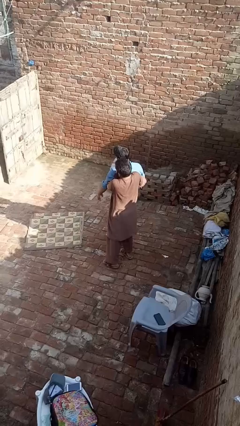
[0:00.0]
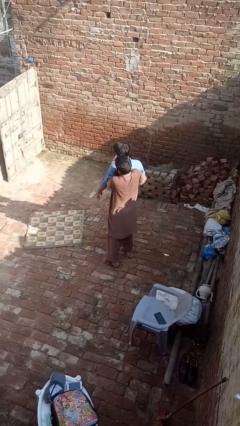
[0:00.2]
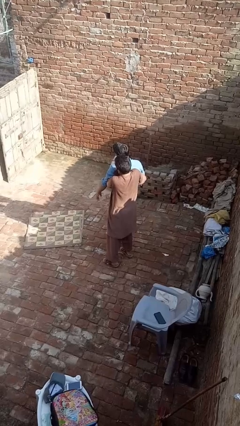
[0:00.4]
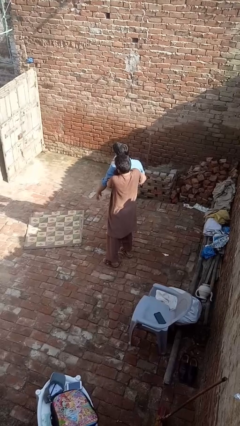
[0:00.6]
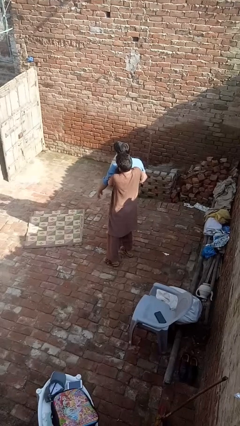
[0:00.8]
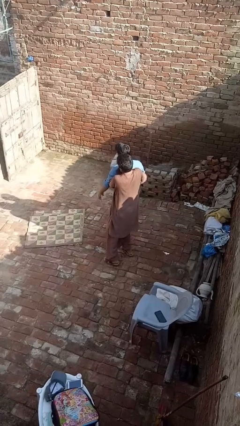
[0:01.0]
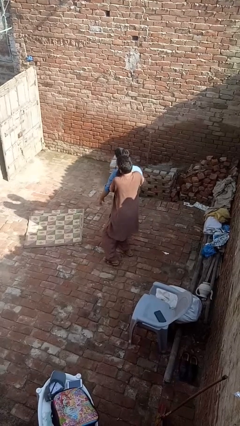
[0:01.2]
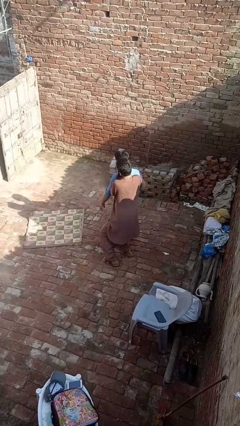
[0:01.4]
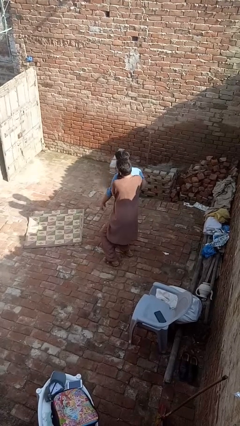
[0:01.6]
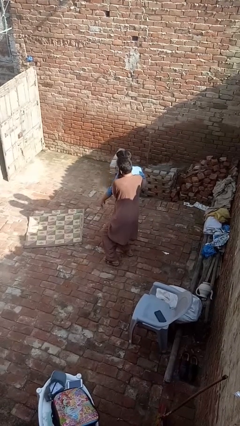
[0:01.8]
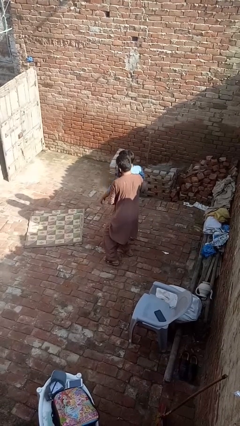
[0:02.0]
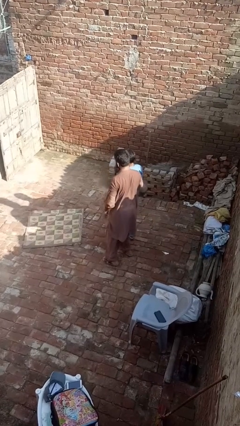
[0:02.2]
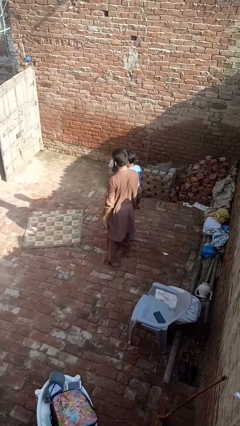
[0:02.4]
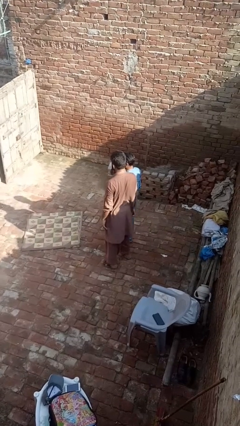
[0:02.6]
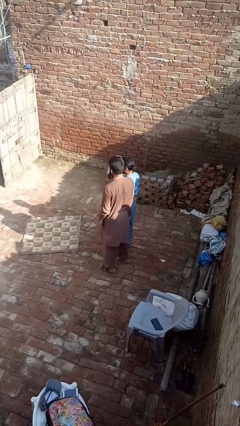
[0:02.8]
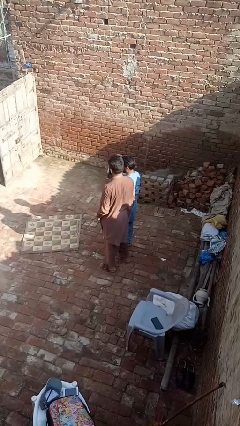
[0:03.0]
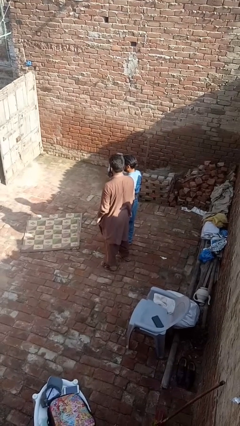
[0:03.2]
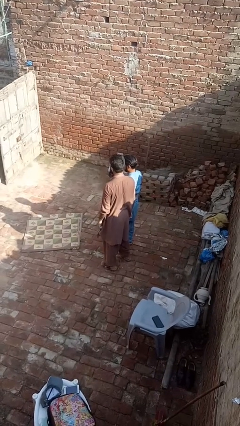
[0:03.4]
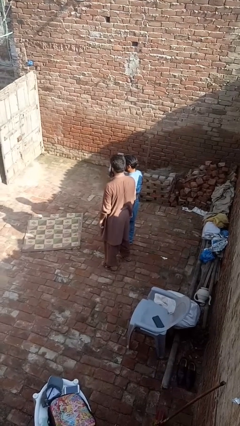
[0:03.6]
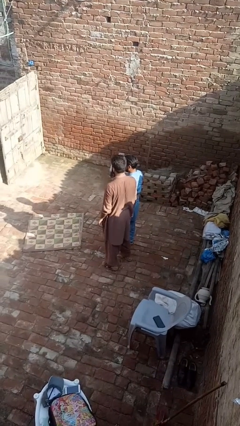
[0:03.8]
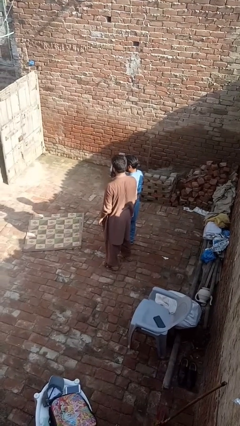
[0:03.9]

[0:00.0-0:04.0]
person puts down person

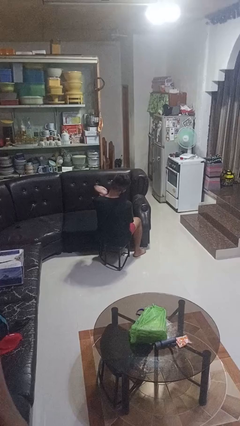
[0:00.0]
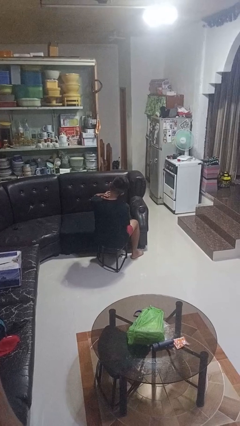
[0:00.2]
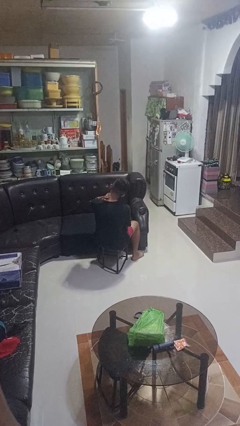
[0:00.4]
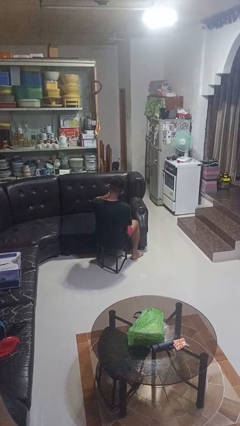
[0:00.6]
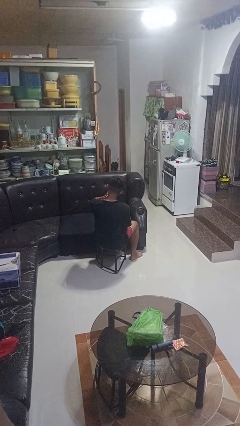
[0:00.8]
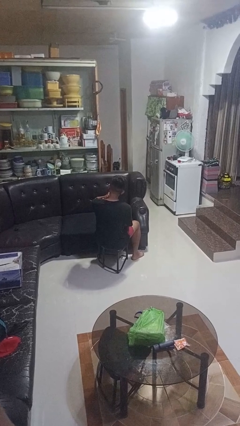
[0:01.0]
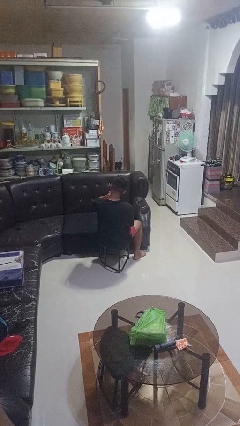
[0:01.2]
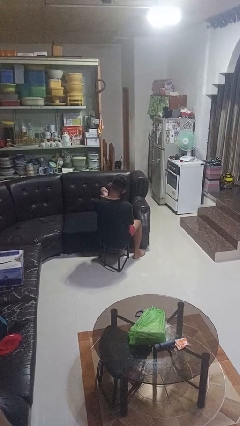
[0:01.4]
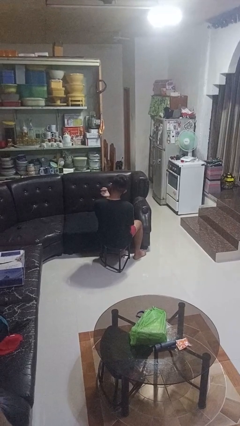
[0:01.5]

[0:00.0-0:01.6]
person swats bug

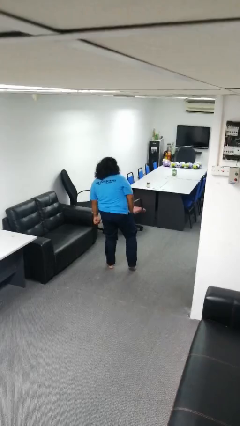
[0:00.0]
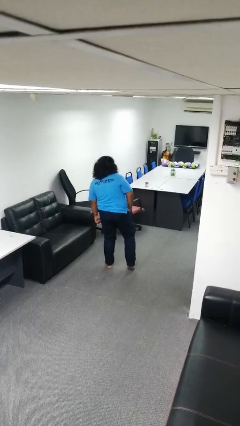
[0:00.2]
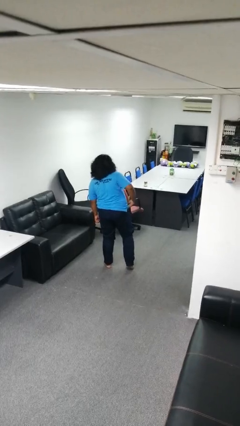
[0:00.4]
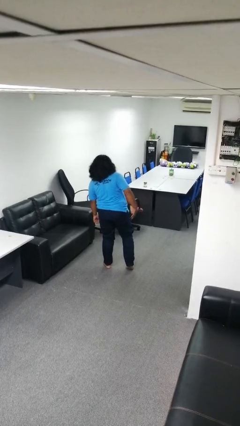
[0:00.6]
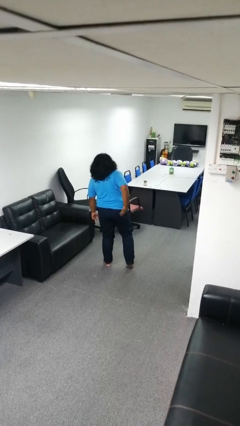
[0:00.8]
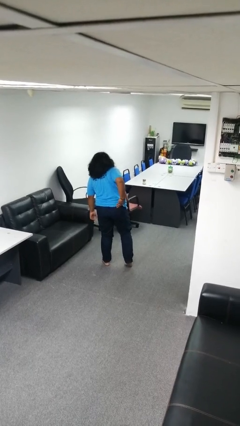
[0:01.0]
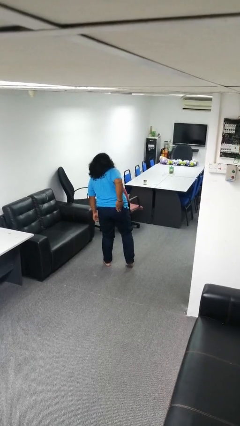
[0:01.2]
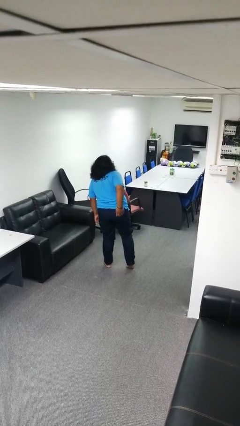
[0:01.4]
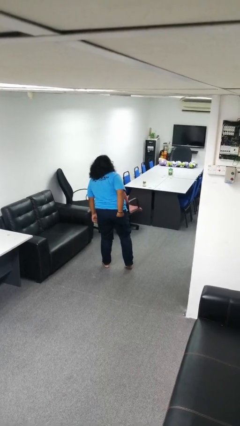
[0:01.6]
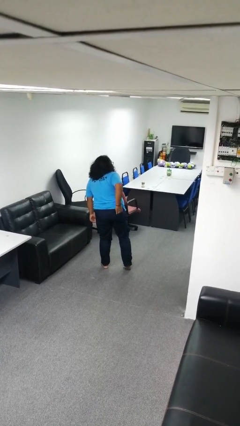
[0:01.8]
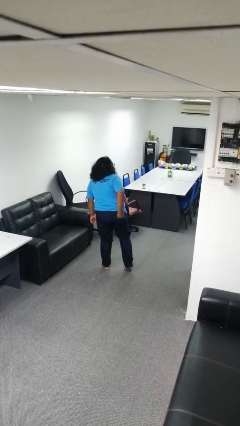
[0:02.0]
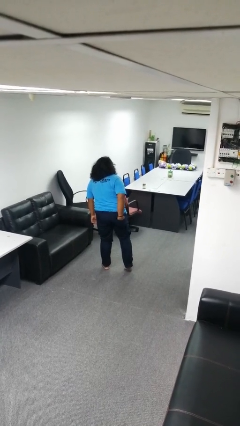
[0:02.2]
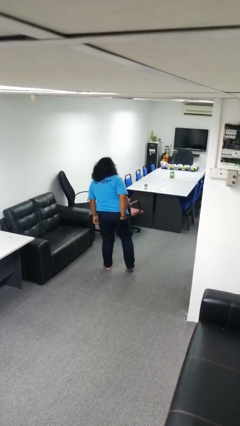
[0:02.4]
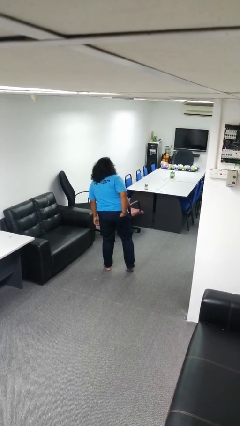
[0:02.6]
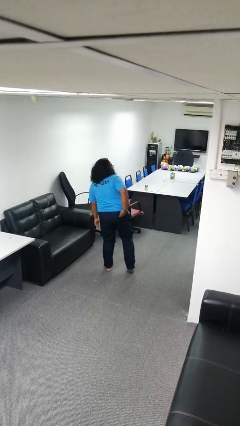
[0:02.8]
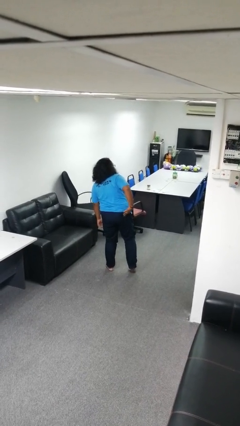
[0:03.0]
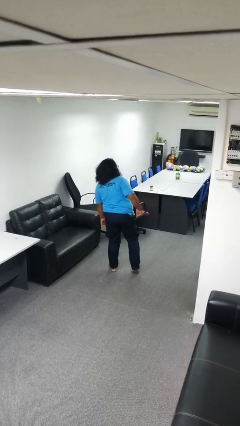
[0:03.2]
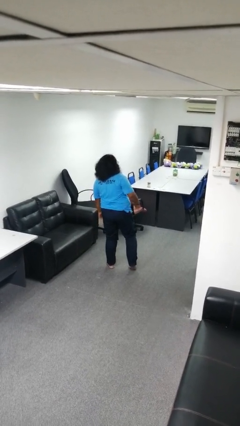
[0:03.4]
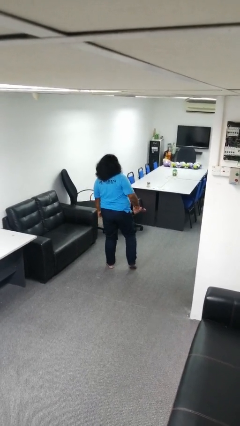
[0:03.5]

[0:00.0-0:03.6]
person puts hands in back pockets

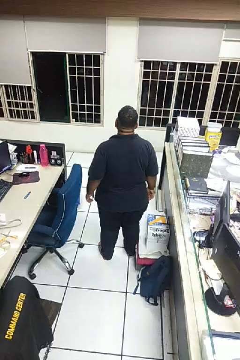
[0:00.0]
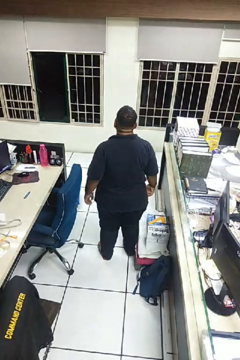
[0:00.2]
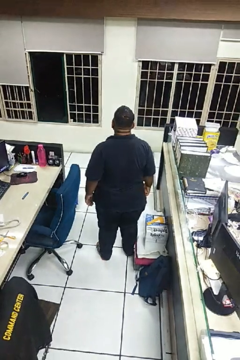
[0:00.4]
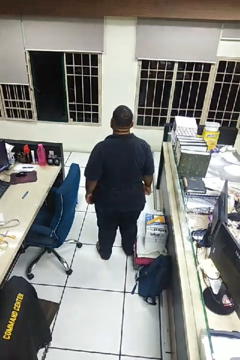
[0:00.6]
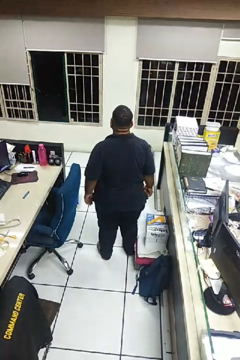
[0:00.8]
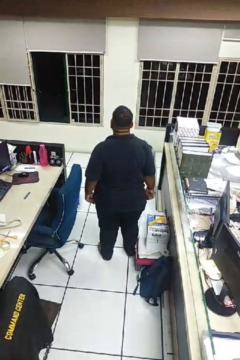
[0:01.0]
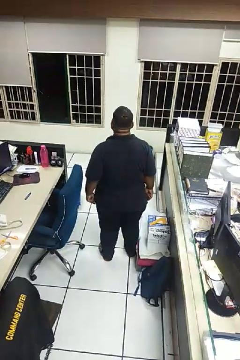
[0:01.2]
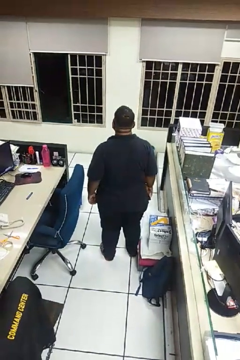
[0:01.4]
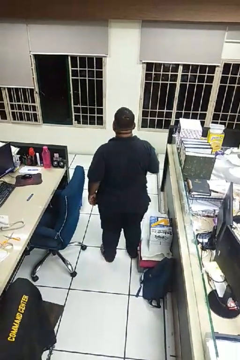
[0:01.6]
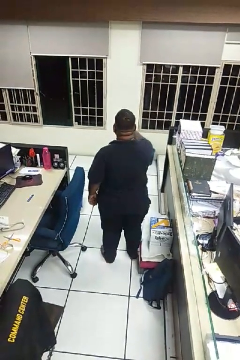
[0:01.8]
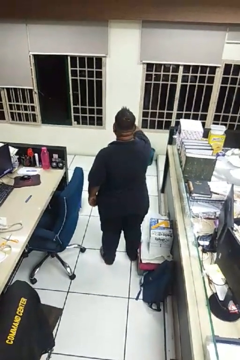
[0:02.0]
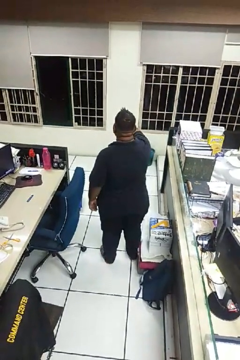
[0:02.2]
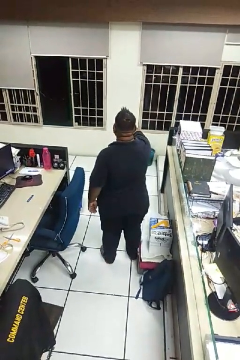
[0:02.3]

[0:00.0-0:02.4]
person gestures stop

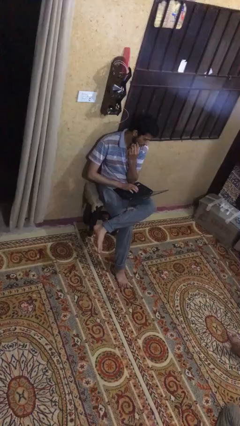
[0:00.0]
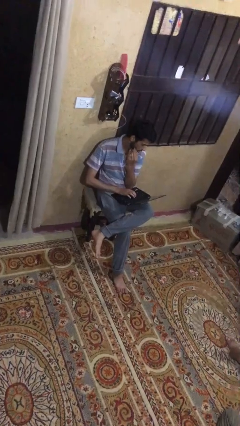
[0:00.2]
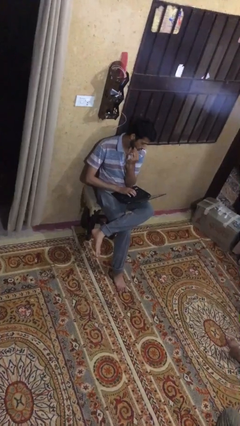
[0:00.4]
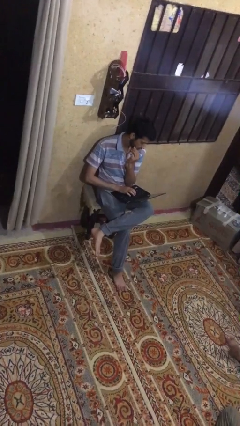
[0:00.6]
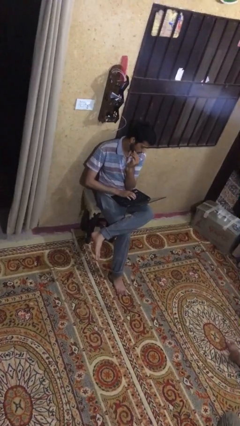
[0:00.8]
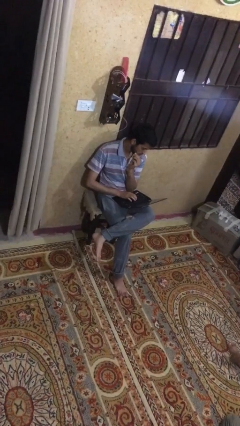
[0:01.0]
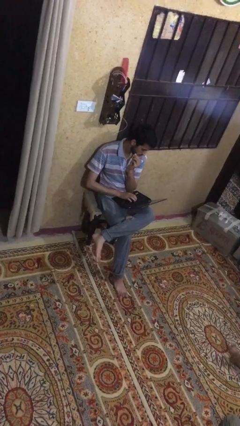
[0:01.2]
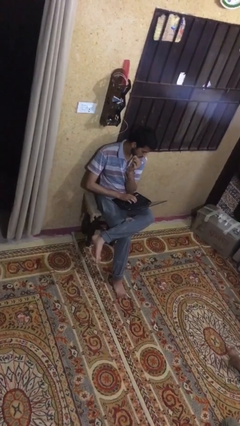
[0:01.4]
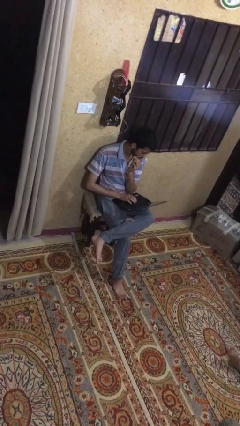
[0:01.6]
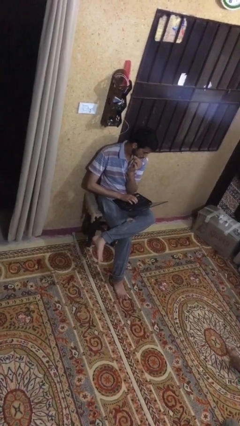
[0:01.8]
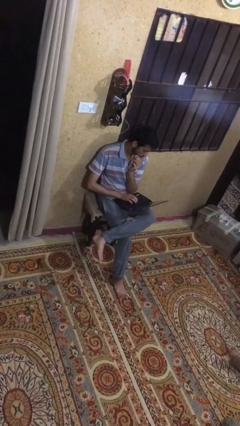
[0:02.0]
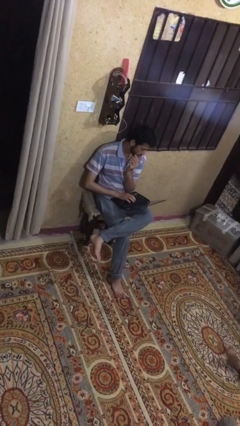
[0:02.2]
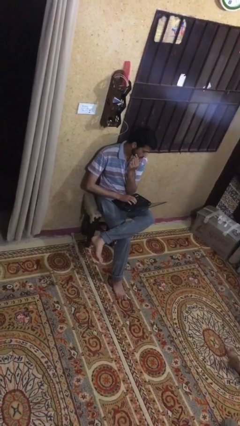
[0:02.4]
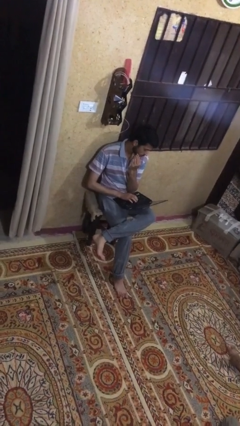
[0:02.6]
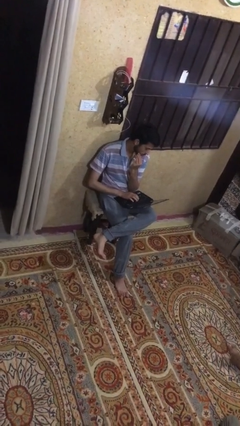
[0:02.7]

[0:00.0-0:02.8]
person interacts with laptop

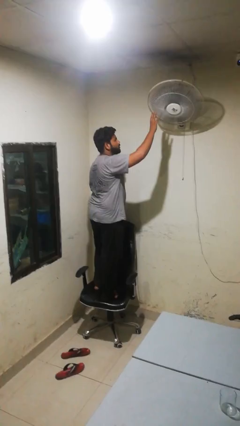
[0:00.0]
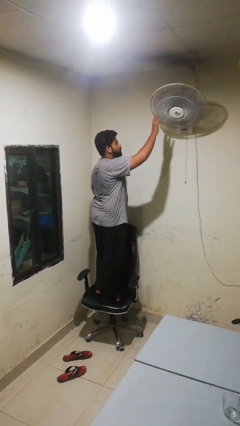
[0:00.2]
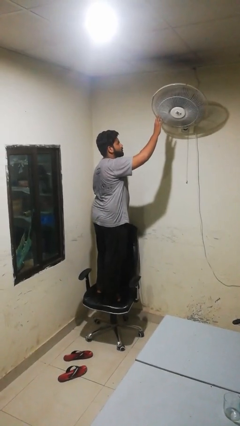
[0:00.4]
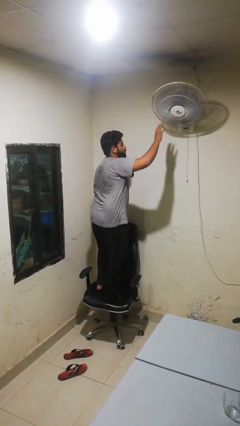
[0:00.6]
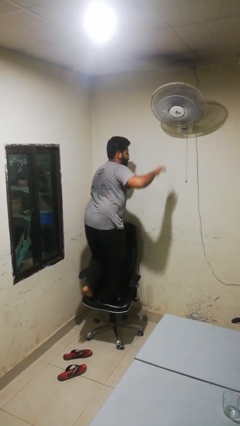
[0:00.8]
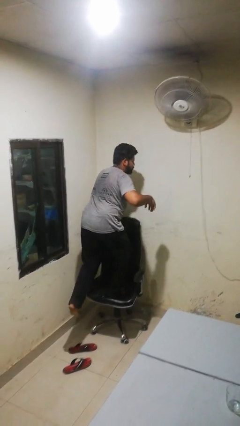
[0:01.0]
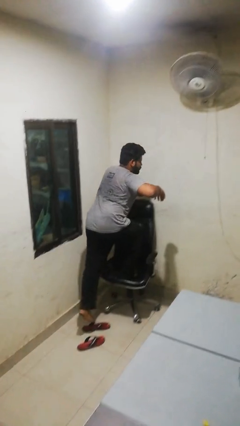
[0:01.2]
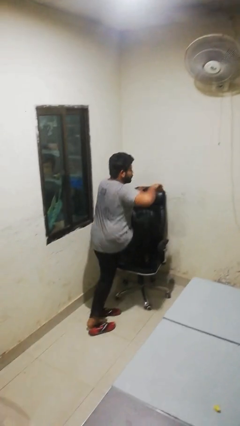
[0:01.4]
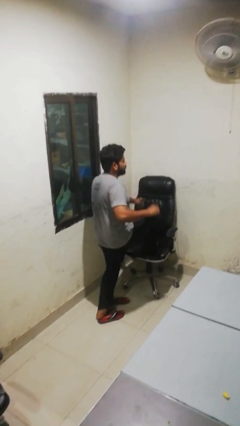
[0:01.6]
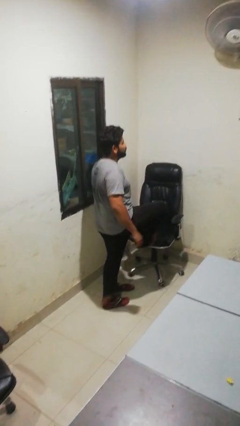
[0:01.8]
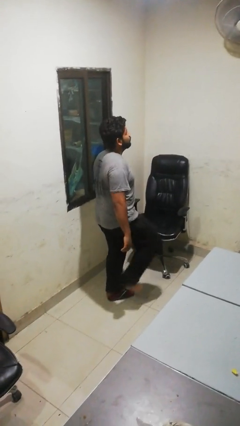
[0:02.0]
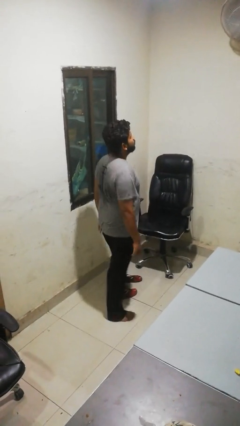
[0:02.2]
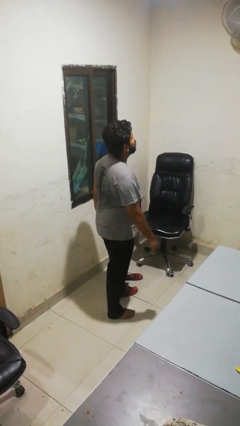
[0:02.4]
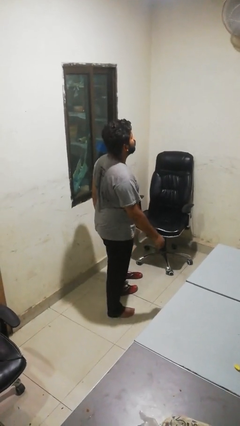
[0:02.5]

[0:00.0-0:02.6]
person climbs off chair

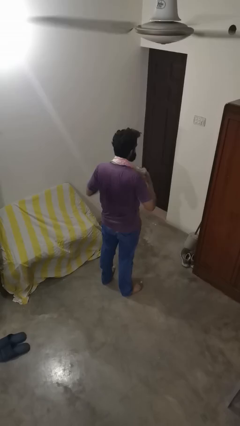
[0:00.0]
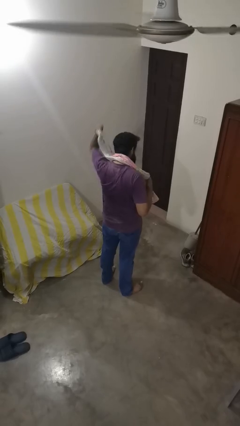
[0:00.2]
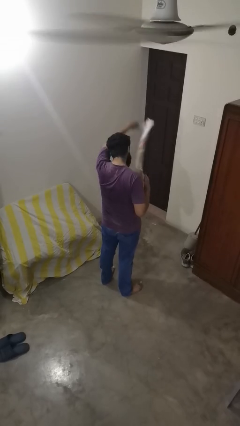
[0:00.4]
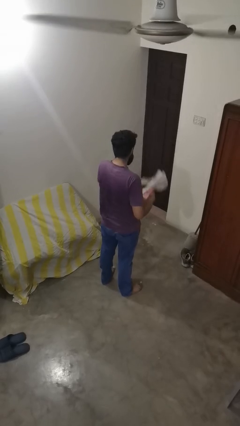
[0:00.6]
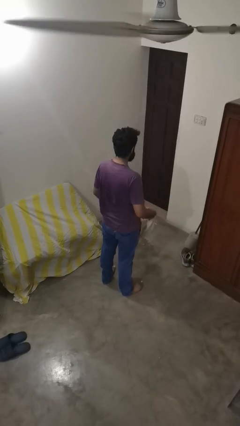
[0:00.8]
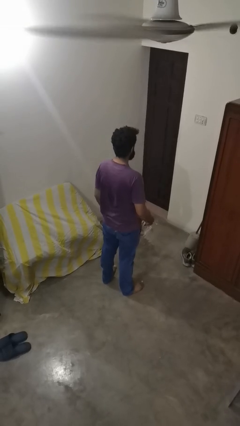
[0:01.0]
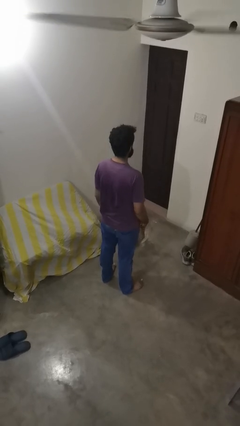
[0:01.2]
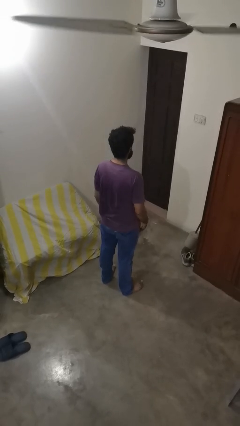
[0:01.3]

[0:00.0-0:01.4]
person takes off scarf
